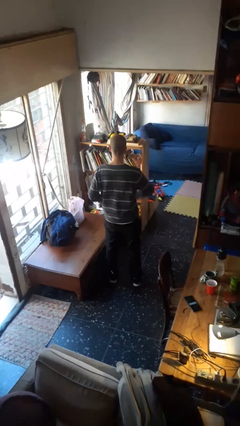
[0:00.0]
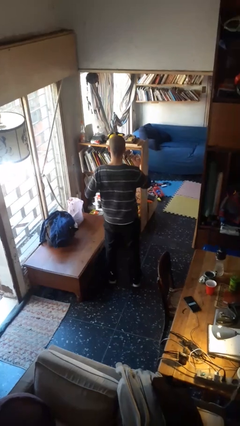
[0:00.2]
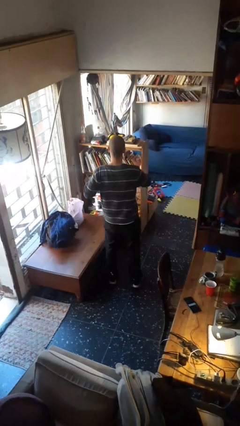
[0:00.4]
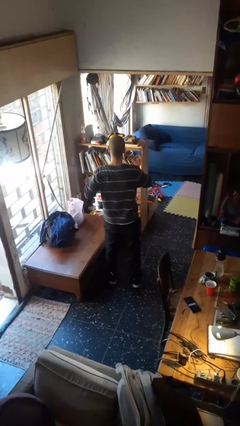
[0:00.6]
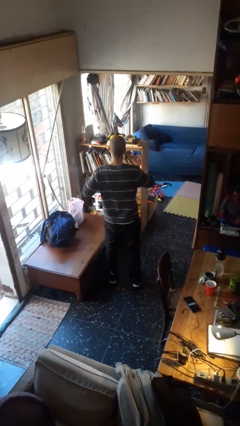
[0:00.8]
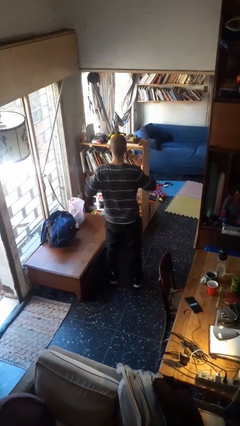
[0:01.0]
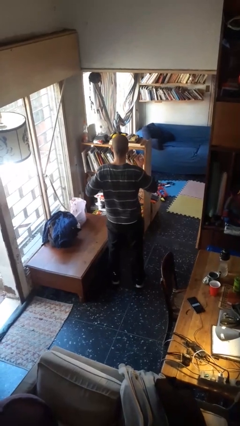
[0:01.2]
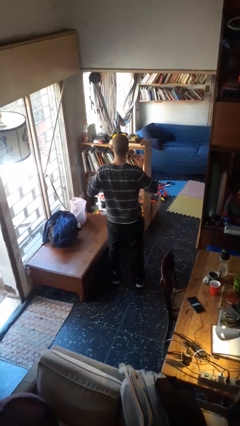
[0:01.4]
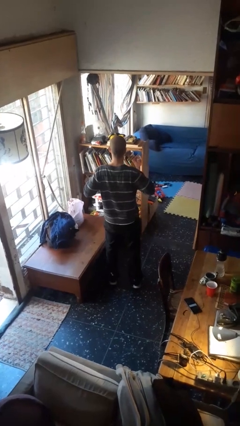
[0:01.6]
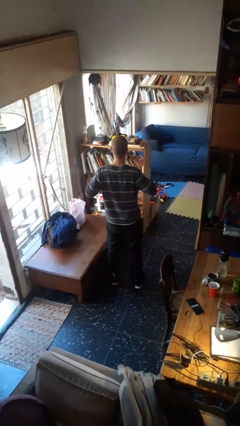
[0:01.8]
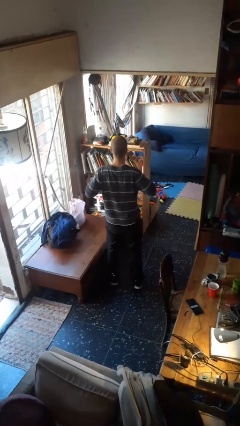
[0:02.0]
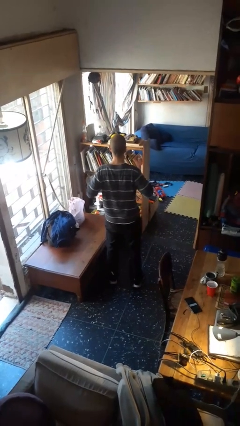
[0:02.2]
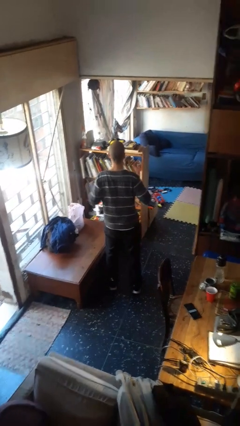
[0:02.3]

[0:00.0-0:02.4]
person drums on chest

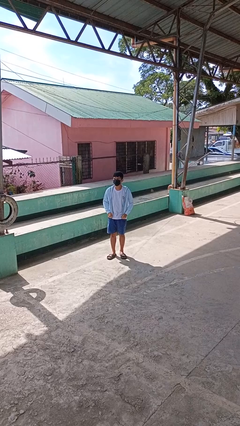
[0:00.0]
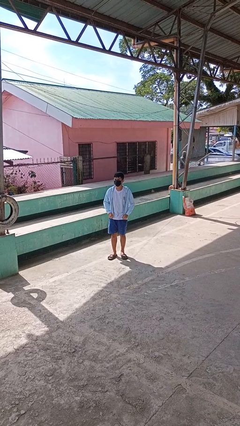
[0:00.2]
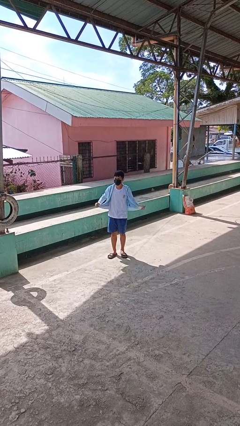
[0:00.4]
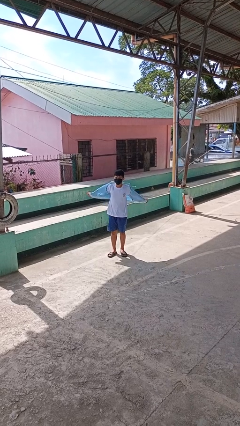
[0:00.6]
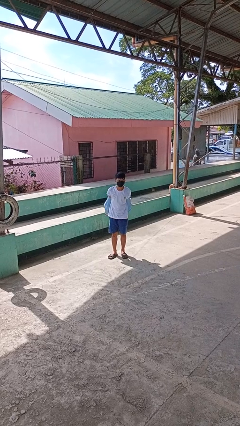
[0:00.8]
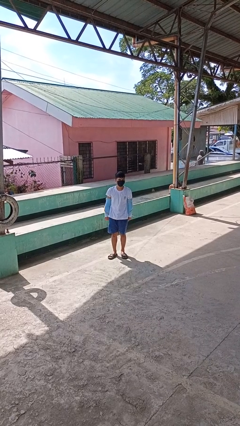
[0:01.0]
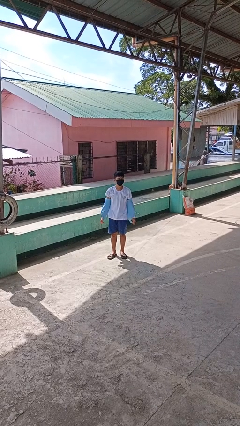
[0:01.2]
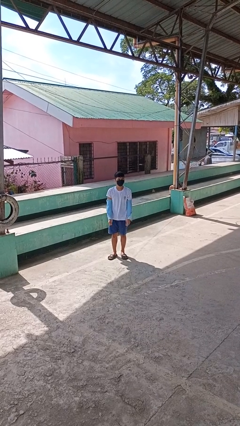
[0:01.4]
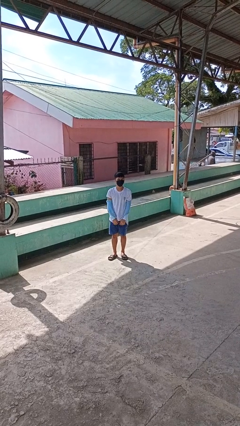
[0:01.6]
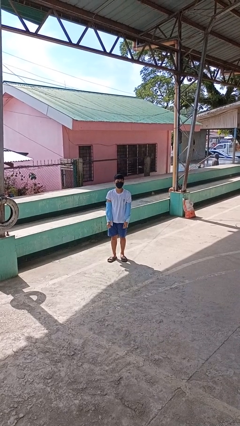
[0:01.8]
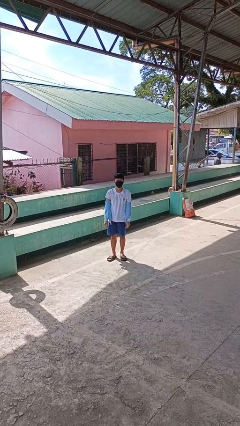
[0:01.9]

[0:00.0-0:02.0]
person takes off jacket

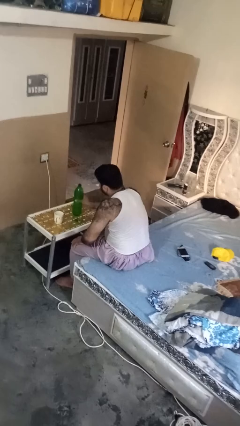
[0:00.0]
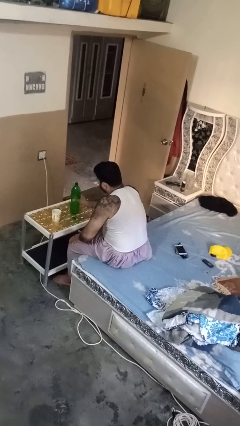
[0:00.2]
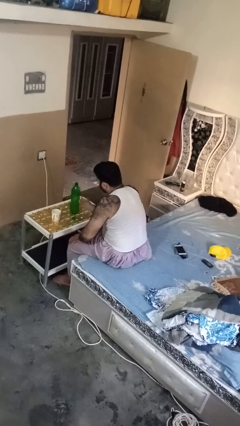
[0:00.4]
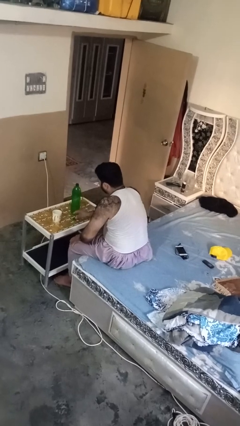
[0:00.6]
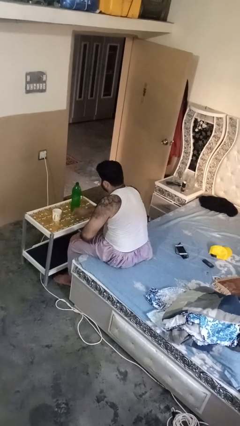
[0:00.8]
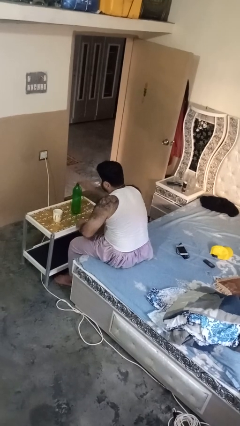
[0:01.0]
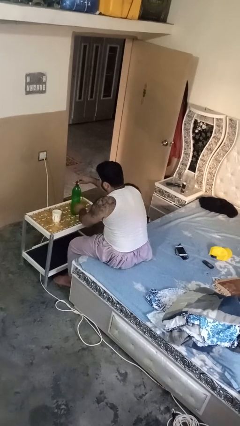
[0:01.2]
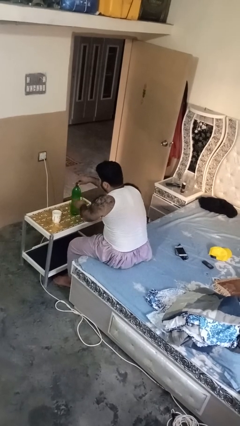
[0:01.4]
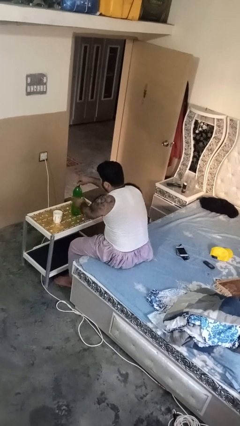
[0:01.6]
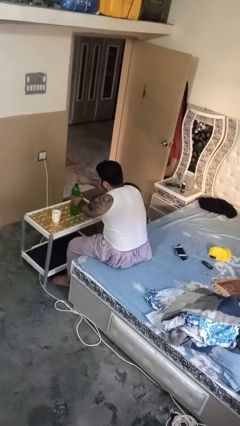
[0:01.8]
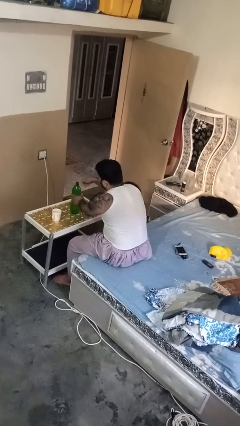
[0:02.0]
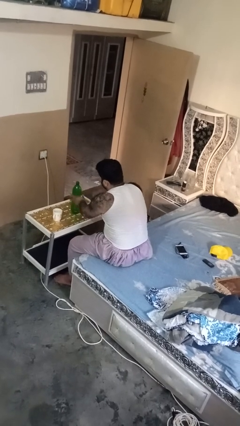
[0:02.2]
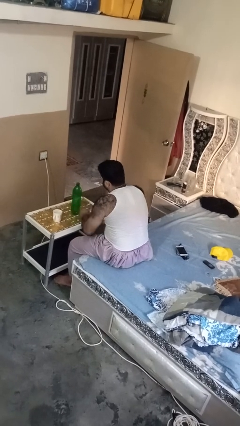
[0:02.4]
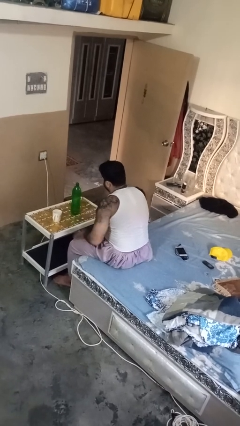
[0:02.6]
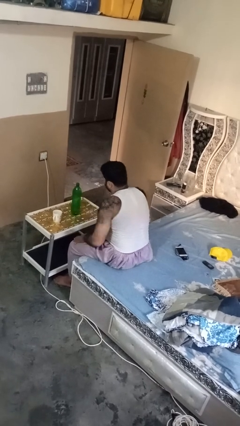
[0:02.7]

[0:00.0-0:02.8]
person screws lid to bottle

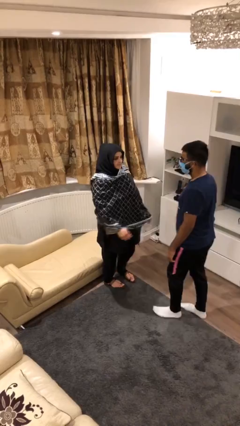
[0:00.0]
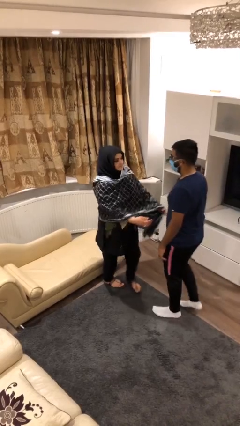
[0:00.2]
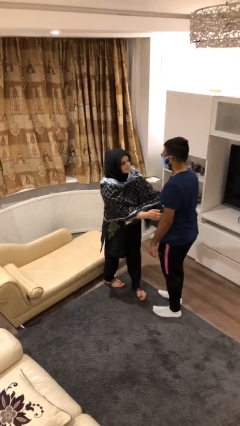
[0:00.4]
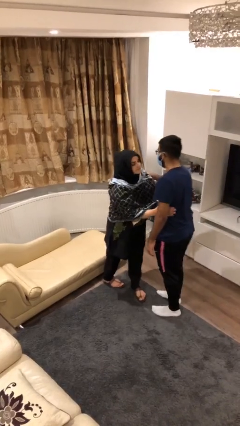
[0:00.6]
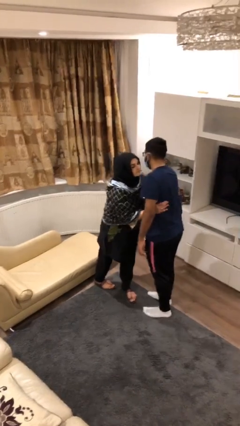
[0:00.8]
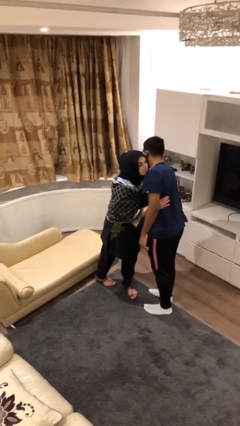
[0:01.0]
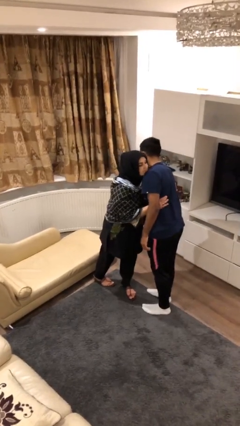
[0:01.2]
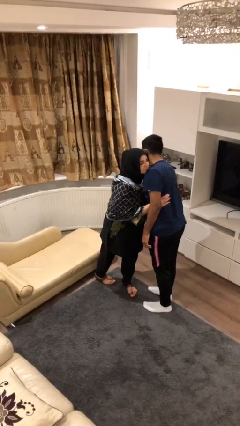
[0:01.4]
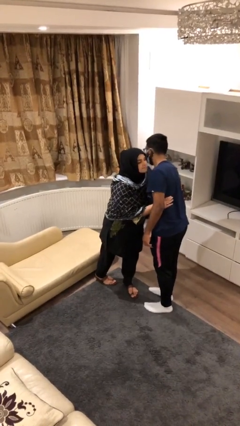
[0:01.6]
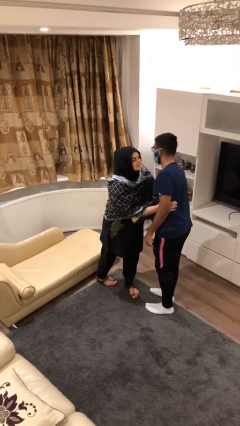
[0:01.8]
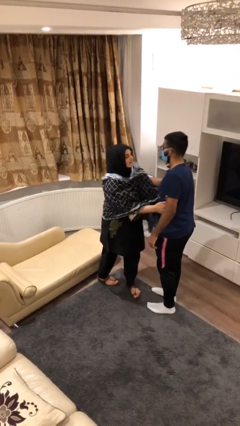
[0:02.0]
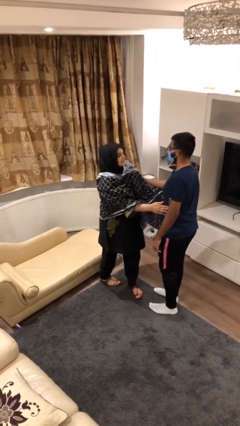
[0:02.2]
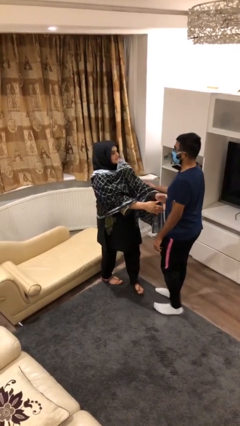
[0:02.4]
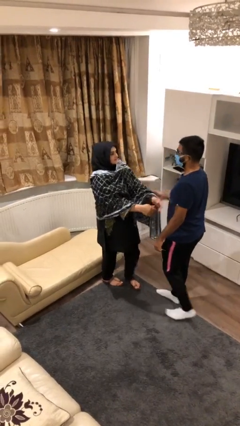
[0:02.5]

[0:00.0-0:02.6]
person embraces person

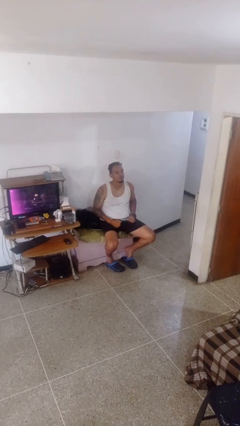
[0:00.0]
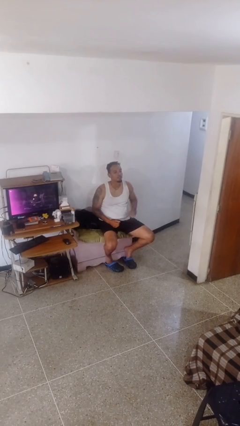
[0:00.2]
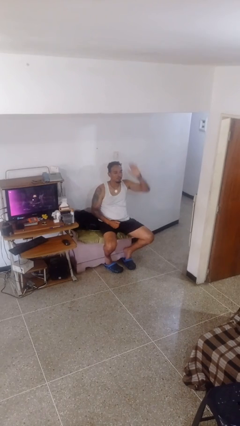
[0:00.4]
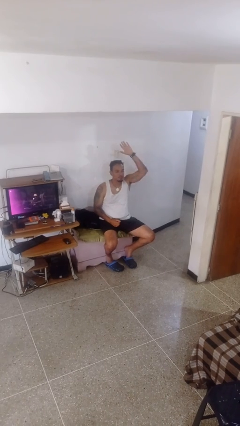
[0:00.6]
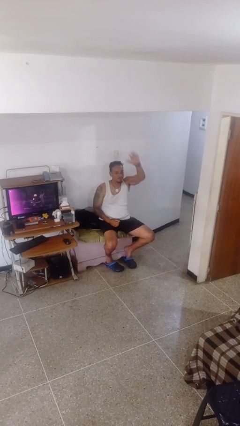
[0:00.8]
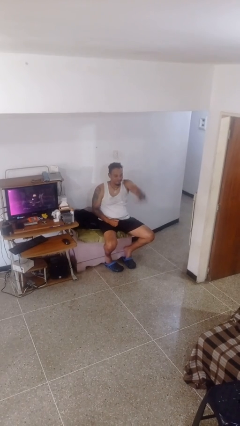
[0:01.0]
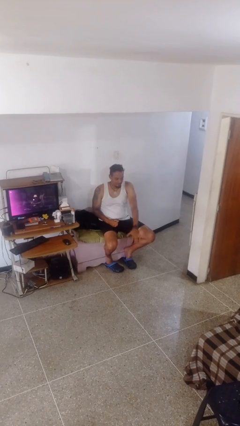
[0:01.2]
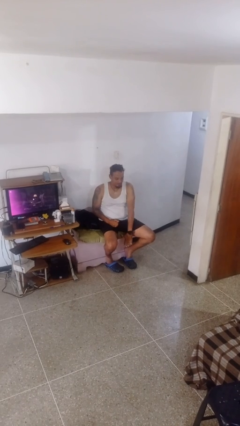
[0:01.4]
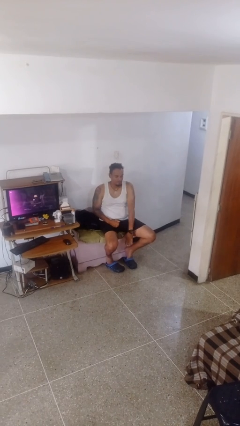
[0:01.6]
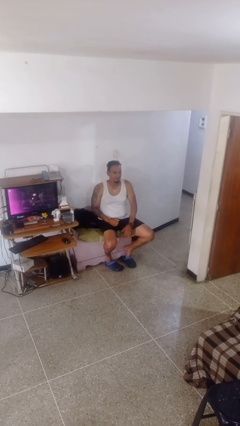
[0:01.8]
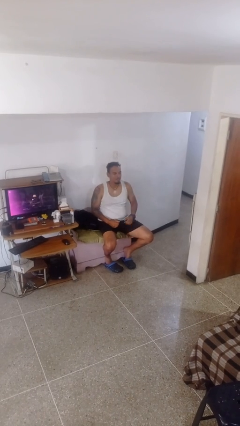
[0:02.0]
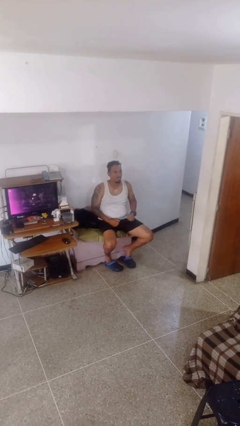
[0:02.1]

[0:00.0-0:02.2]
person gestures swipe down

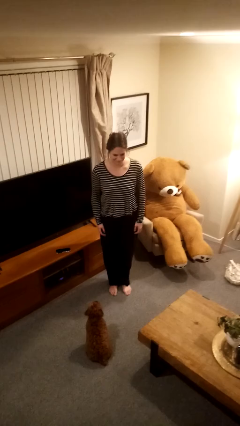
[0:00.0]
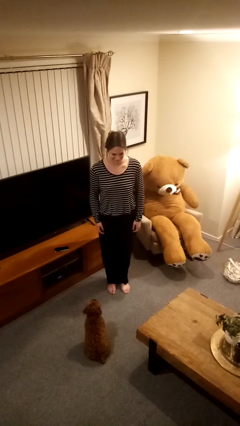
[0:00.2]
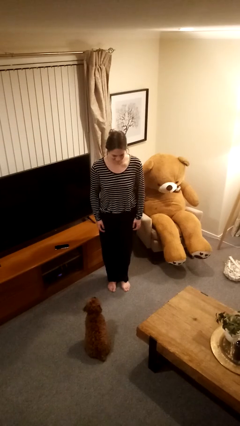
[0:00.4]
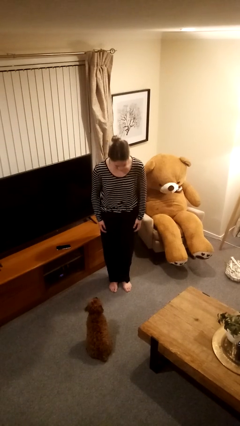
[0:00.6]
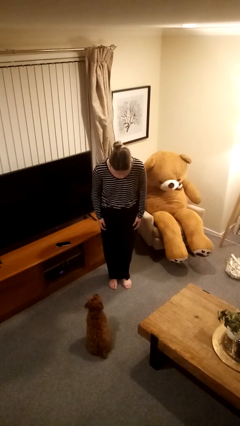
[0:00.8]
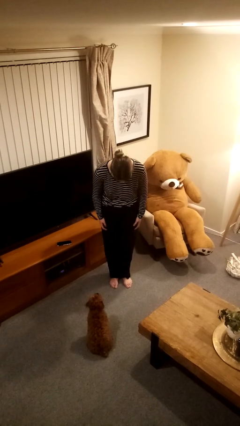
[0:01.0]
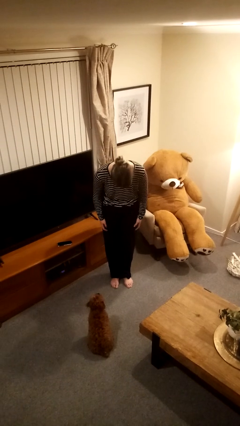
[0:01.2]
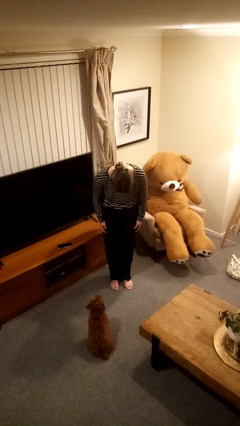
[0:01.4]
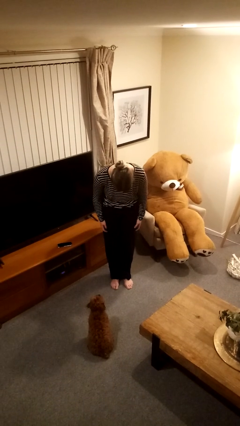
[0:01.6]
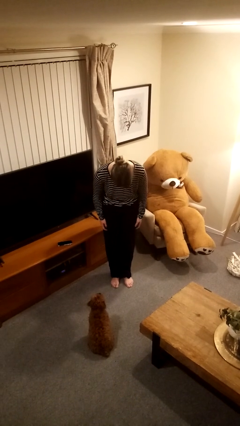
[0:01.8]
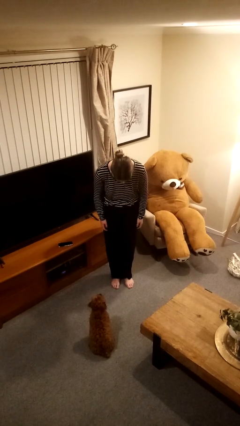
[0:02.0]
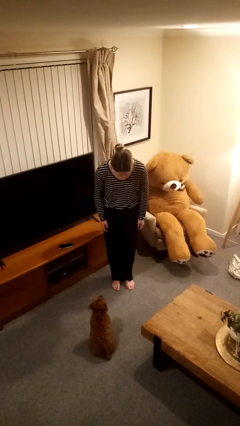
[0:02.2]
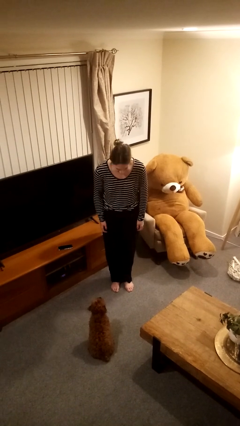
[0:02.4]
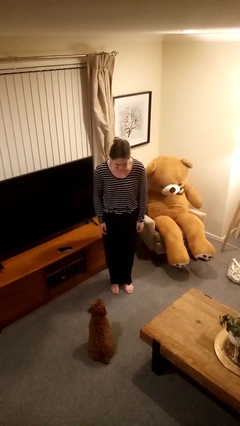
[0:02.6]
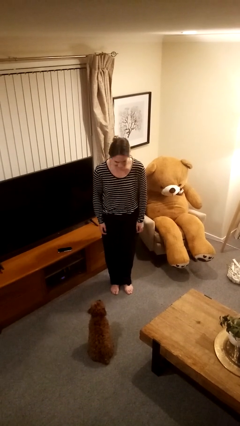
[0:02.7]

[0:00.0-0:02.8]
person bows

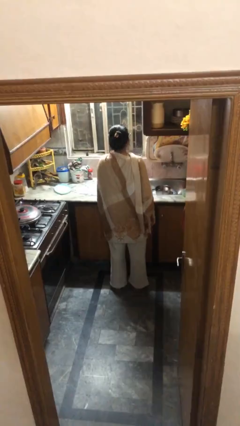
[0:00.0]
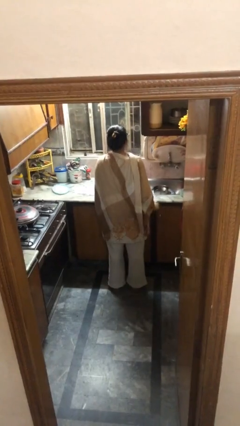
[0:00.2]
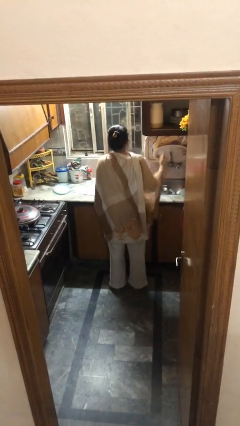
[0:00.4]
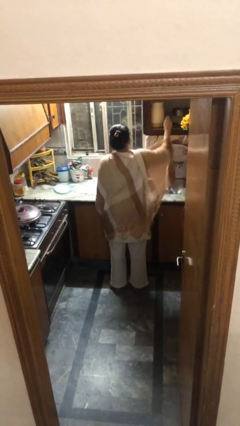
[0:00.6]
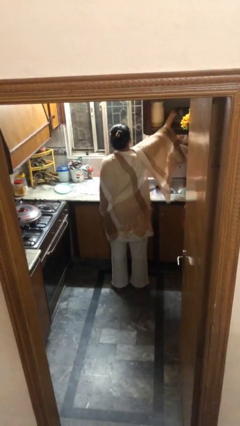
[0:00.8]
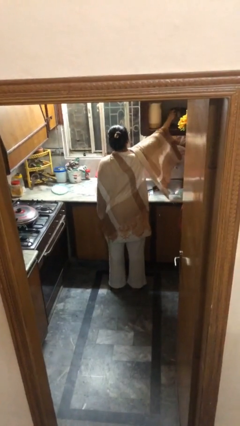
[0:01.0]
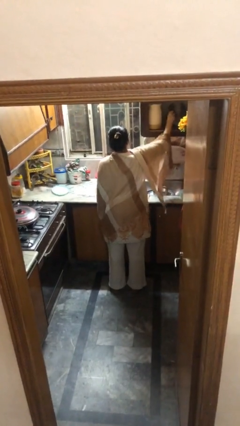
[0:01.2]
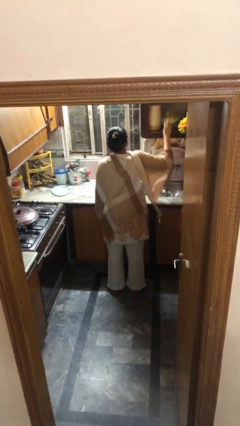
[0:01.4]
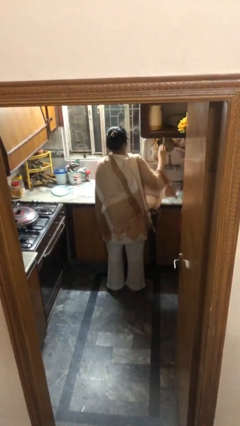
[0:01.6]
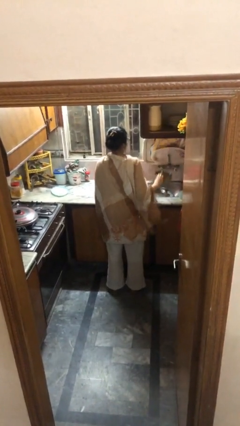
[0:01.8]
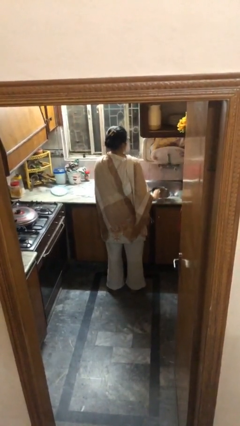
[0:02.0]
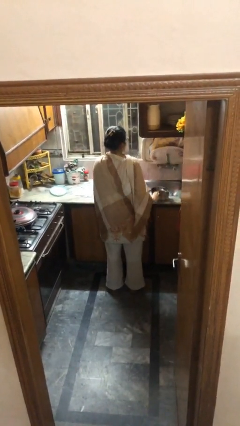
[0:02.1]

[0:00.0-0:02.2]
person takes object from cabinet

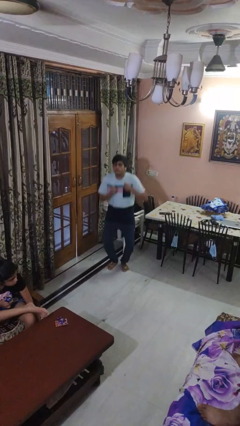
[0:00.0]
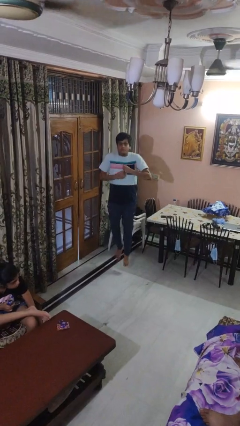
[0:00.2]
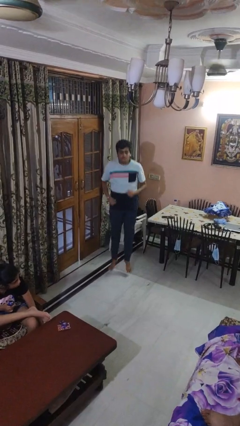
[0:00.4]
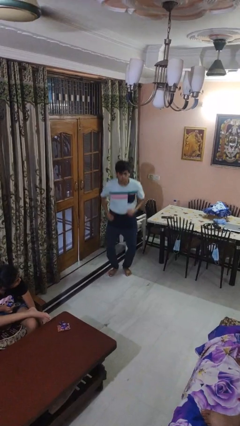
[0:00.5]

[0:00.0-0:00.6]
person jumps
